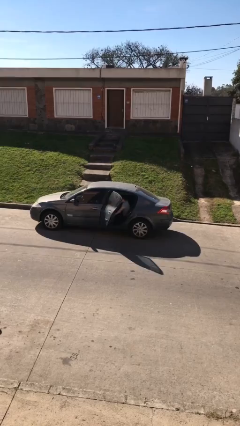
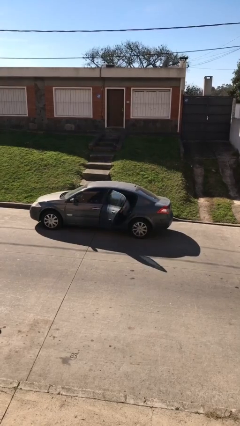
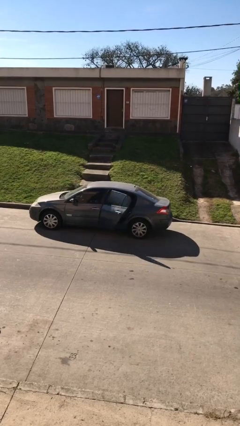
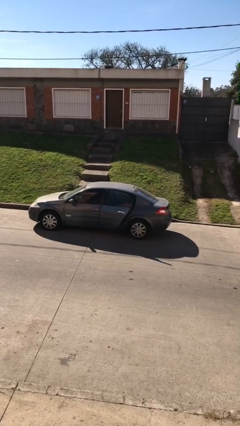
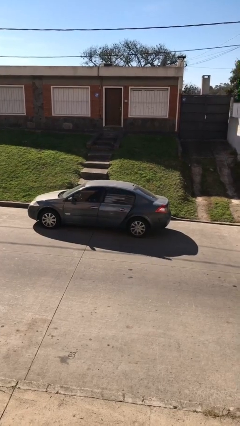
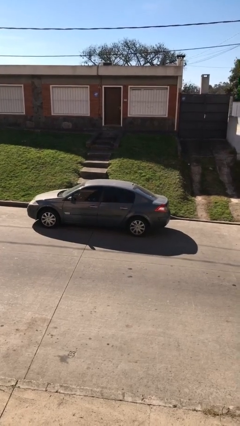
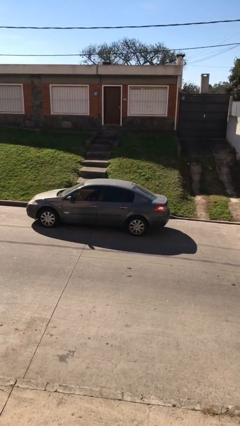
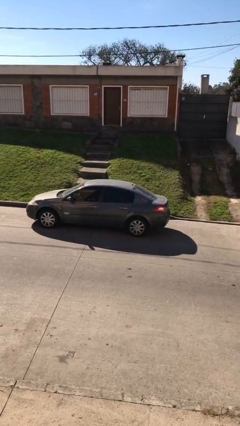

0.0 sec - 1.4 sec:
person closes car door

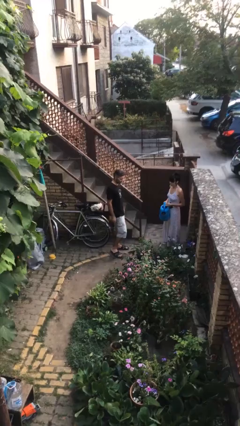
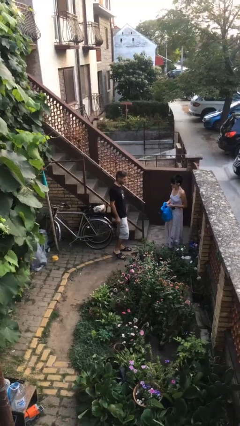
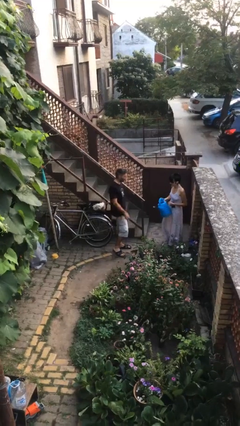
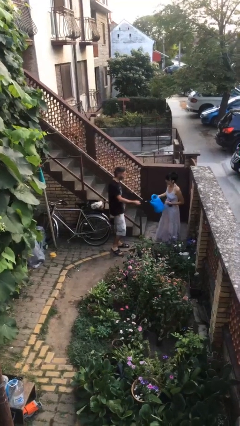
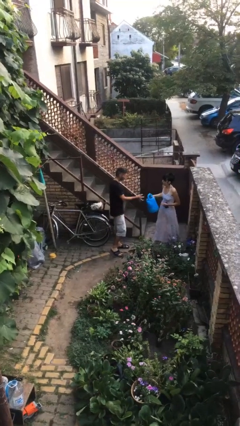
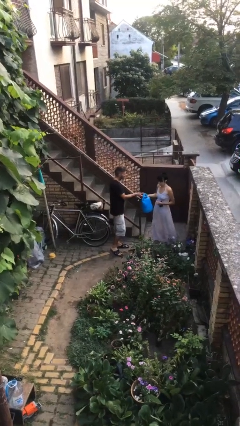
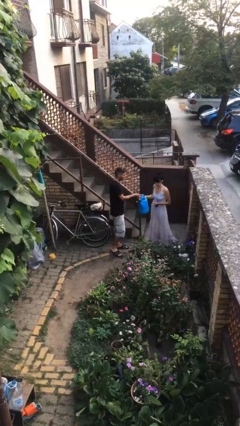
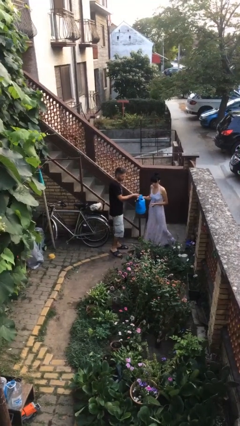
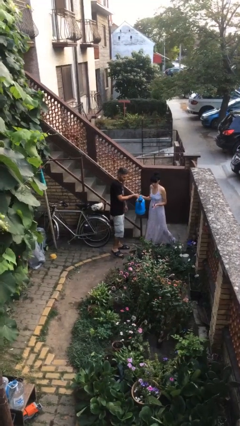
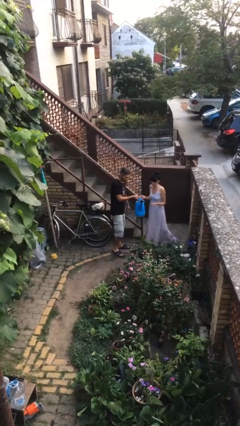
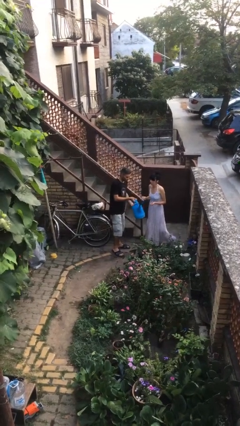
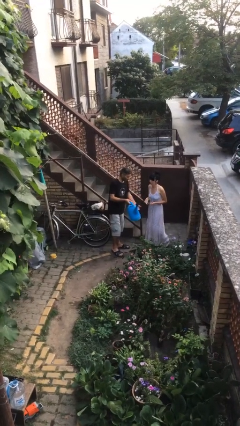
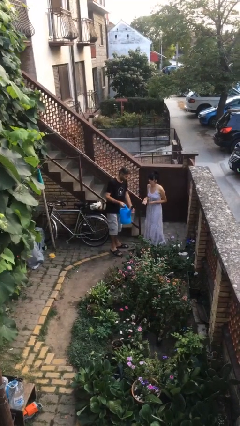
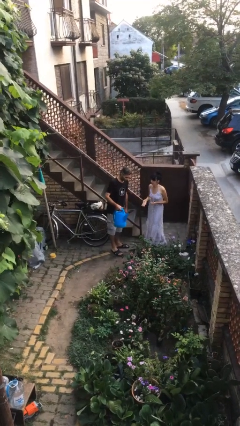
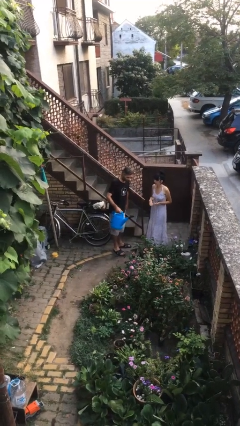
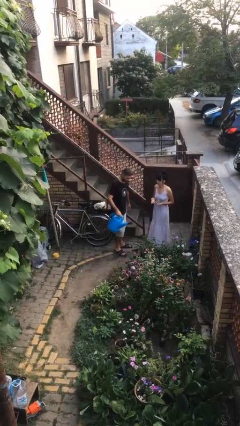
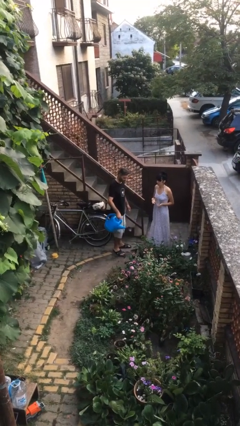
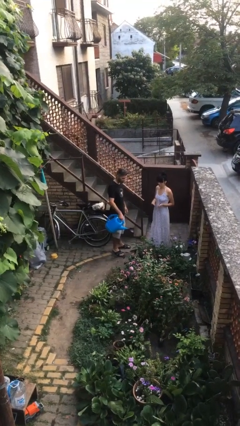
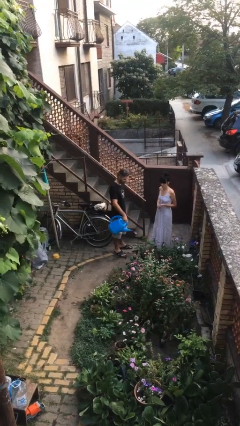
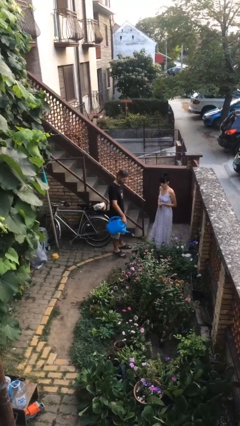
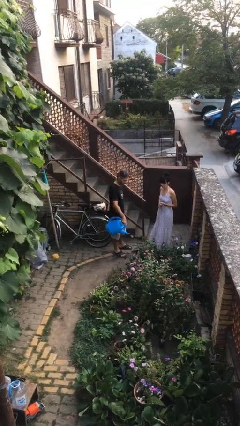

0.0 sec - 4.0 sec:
person transfers object to person

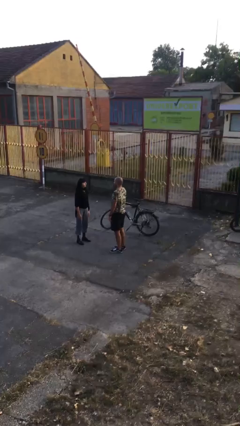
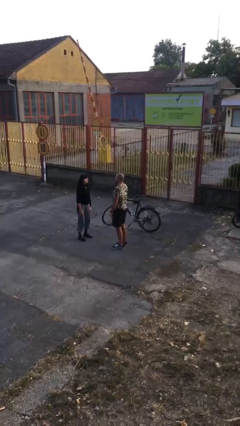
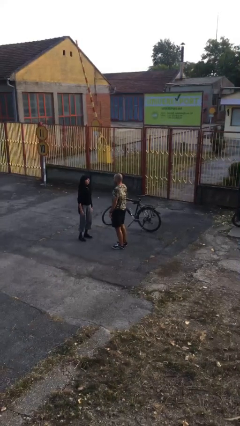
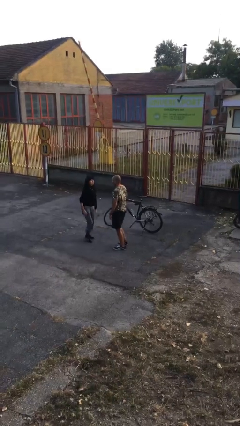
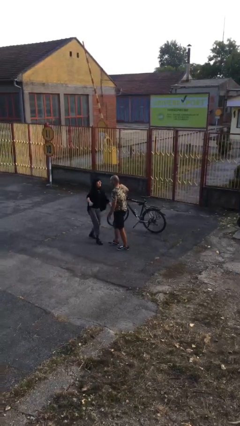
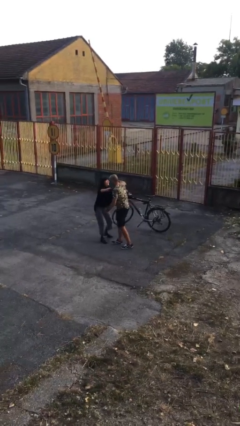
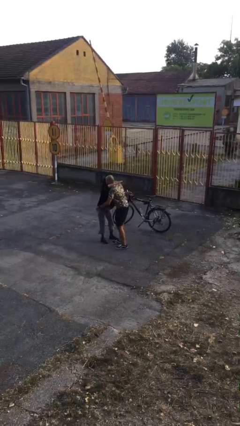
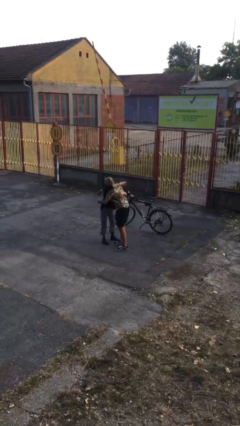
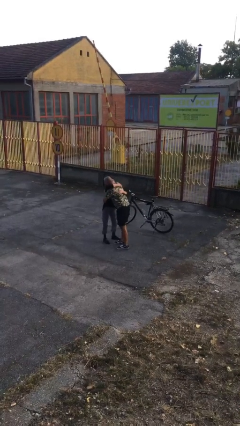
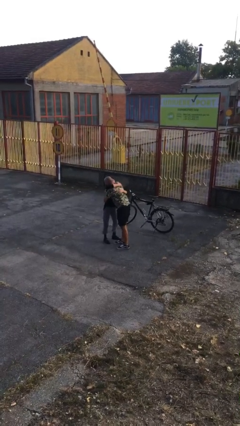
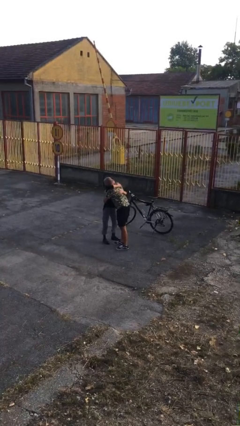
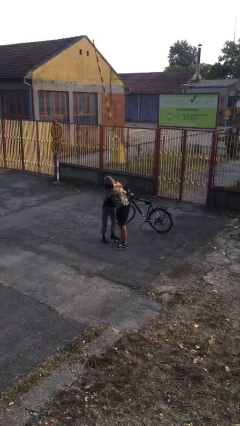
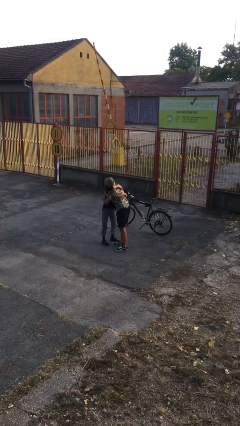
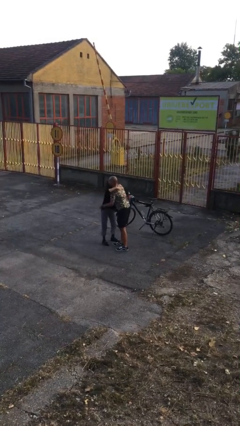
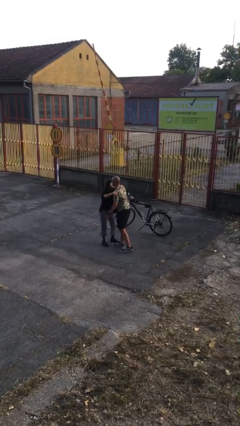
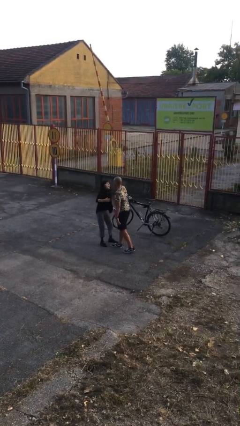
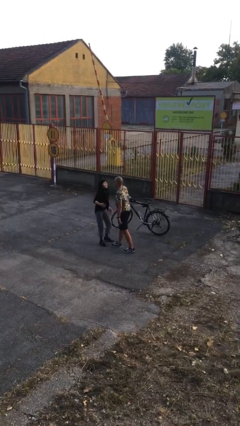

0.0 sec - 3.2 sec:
person embraces person

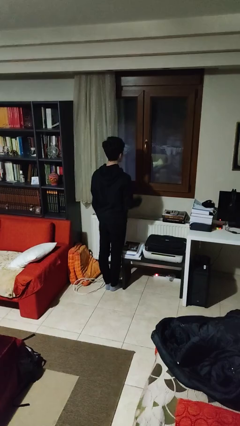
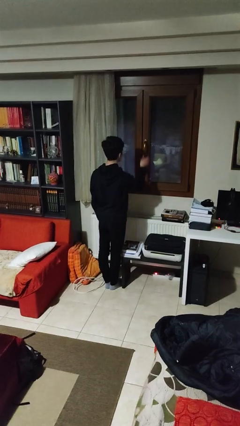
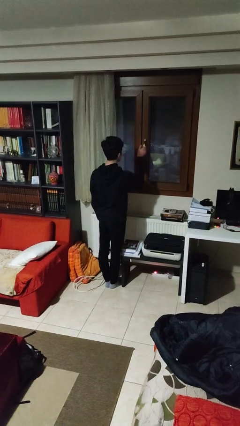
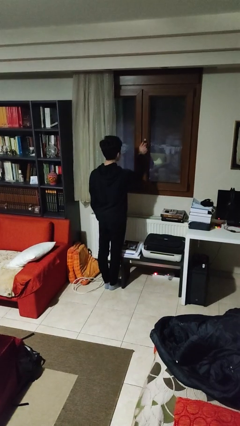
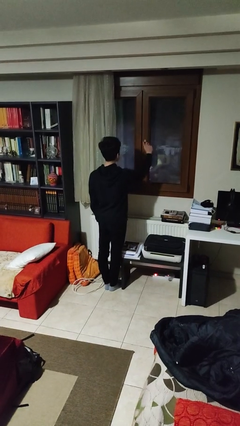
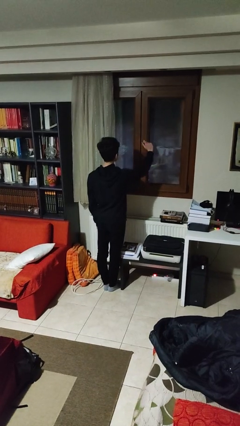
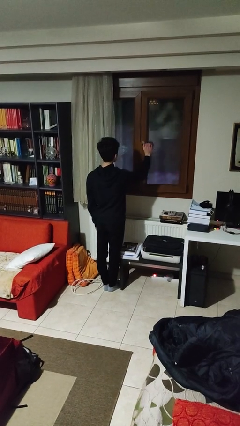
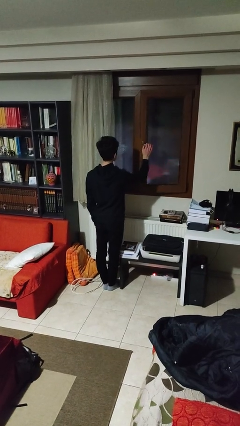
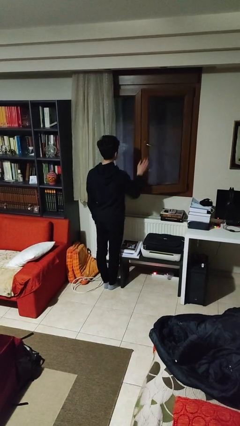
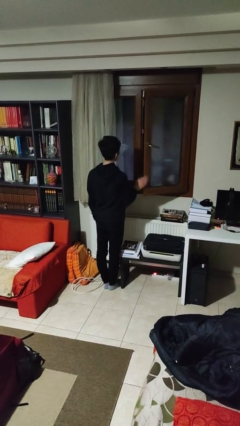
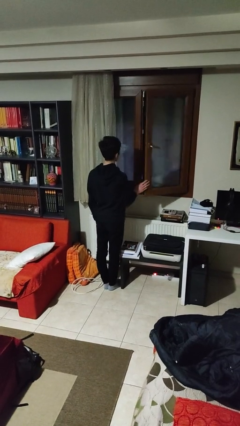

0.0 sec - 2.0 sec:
person opens home window

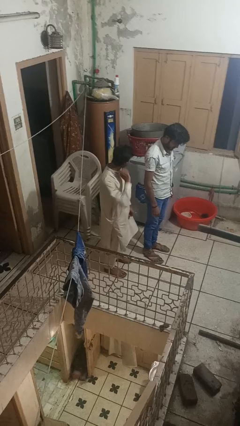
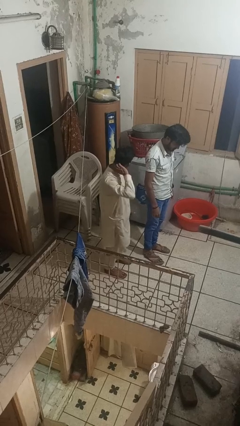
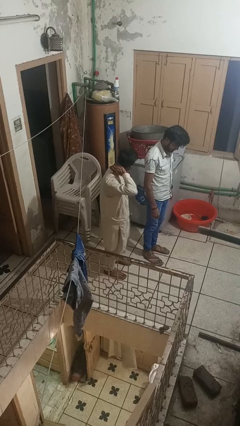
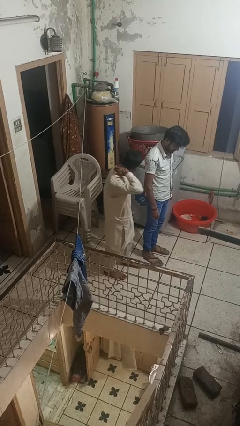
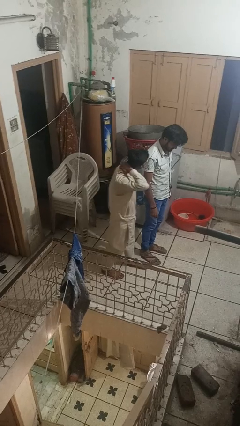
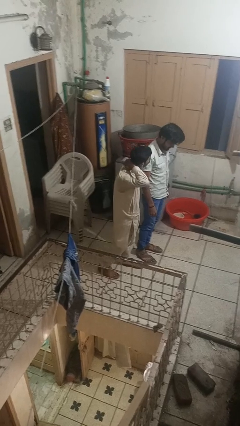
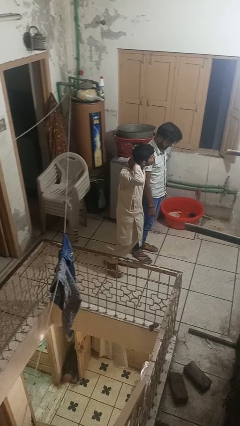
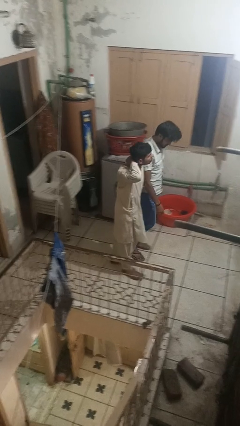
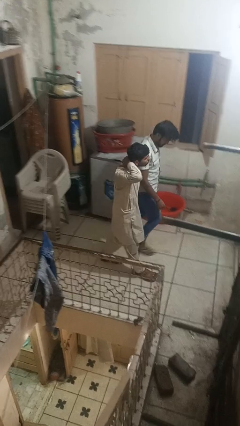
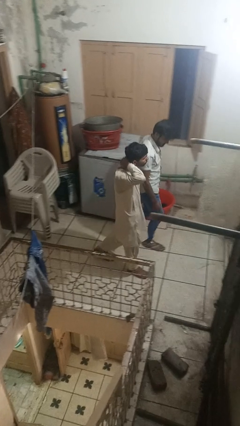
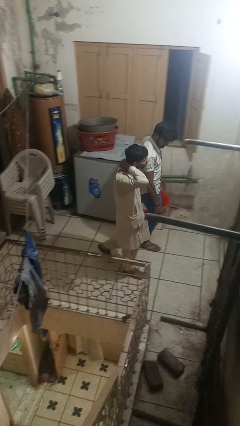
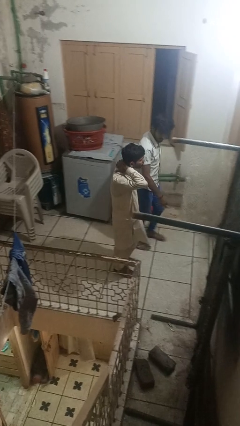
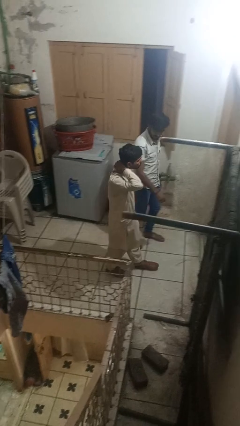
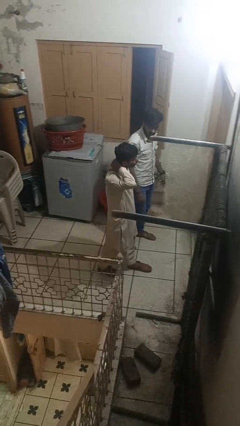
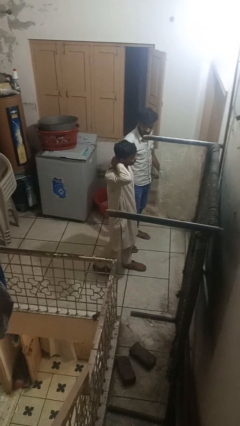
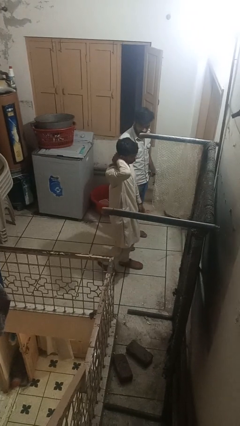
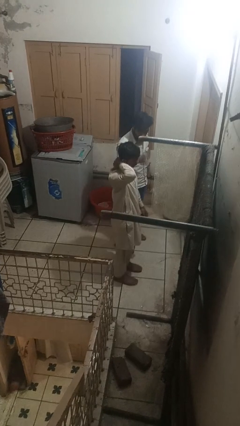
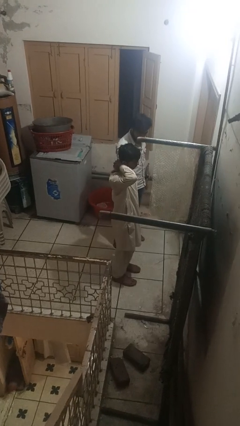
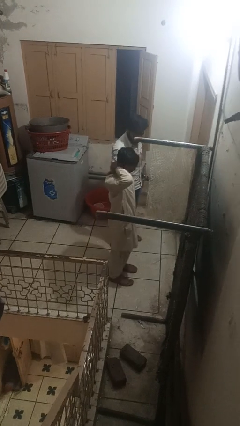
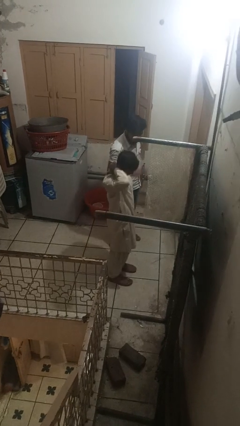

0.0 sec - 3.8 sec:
person bumps into person

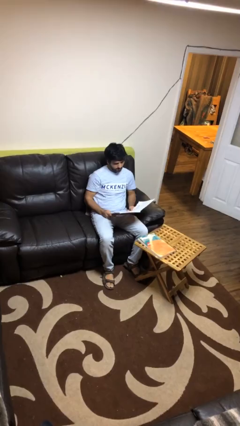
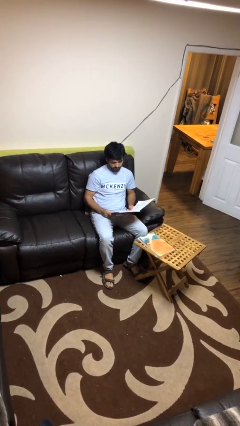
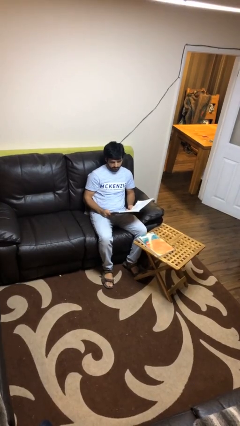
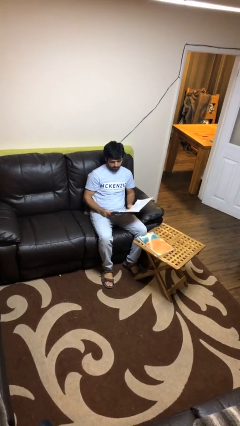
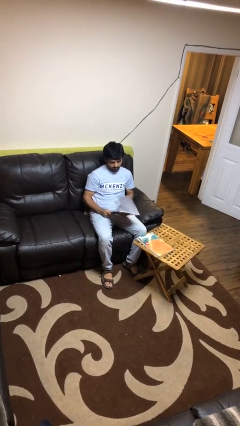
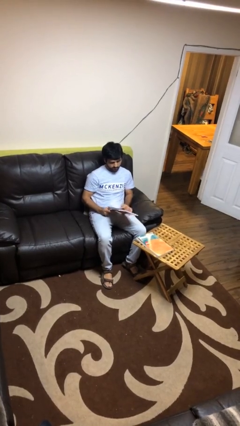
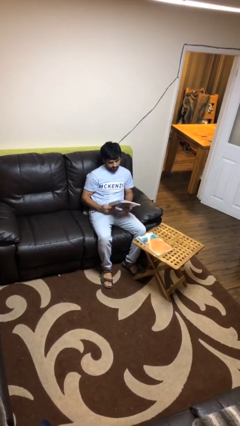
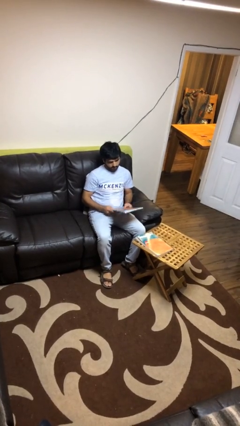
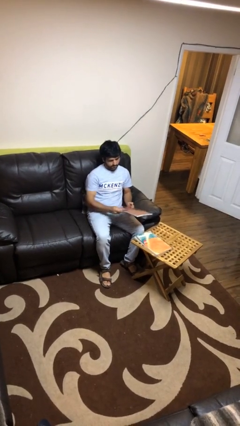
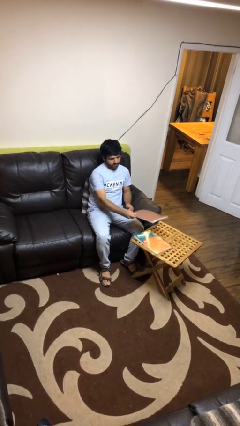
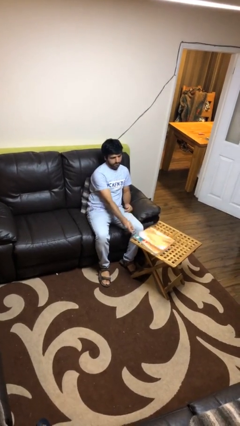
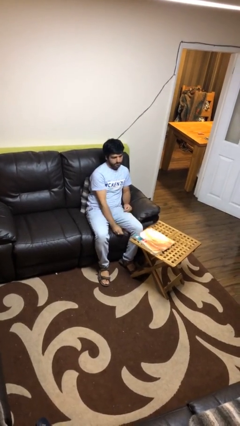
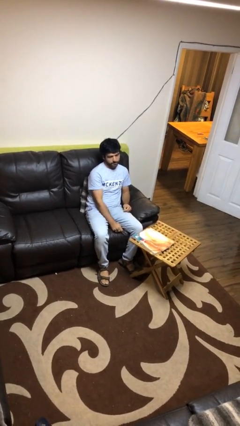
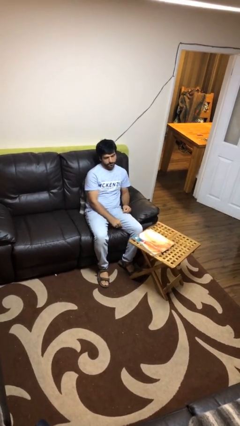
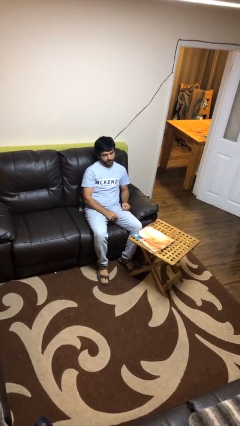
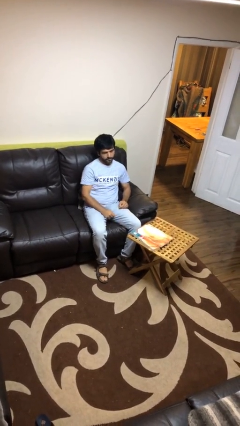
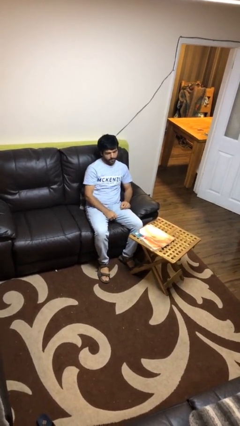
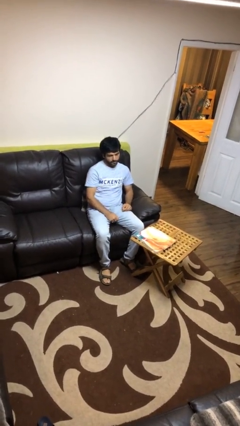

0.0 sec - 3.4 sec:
person puts down object on table
